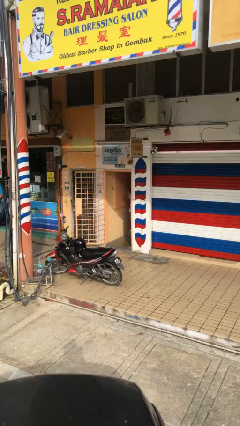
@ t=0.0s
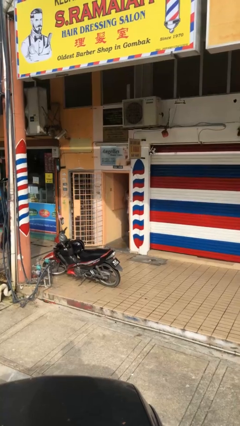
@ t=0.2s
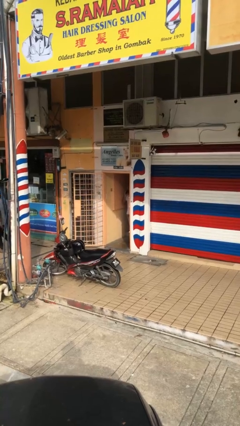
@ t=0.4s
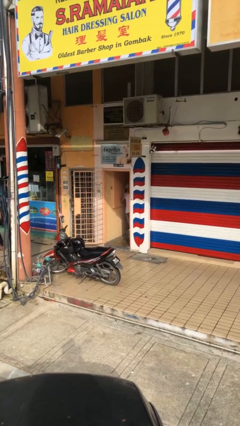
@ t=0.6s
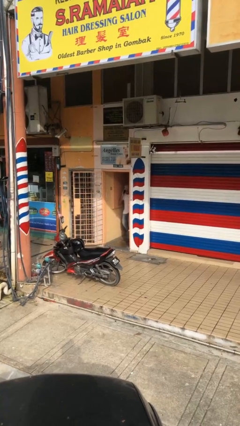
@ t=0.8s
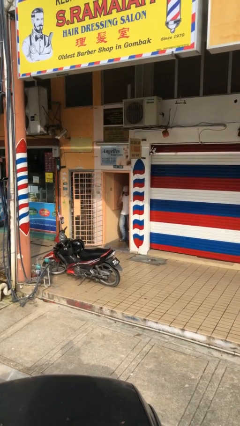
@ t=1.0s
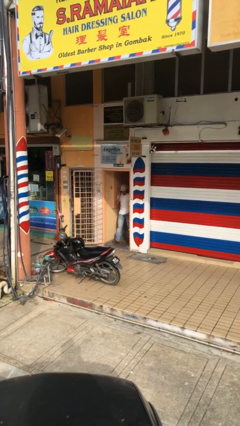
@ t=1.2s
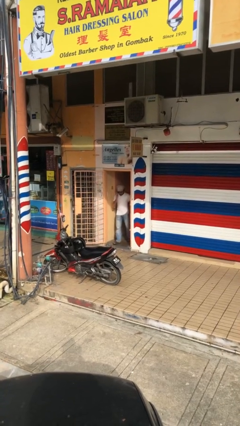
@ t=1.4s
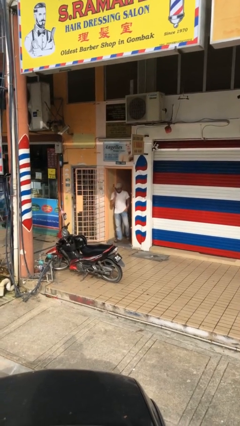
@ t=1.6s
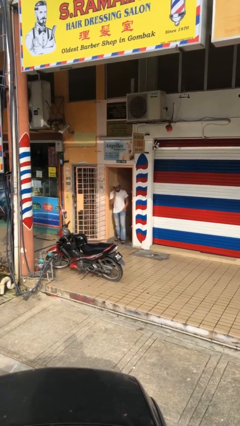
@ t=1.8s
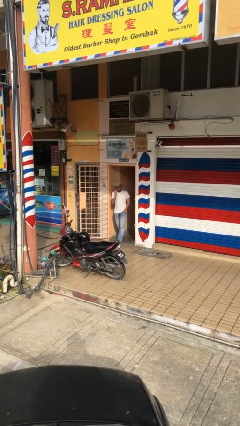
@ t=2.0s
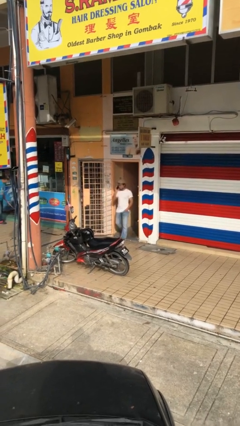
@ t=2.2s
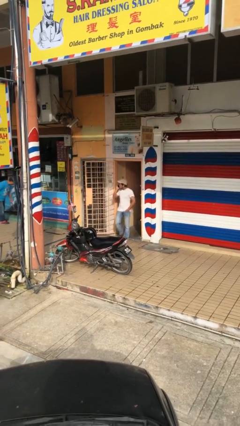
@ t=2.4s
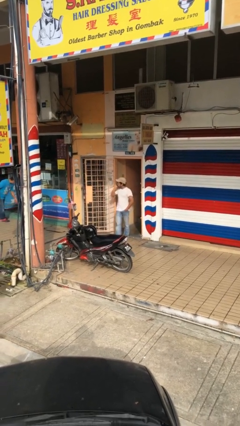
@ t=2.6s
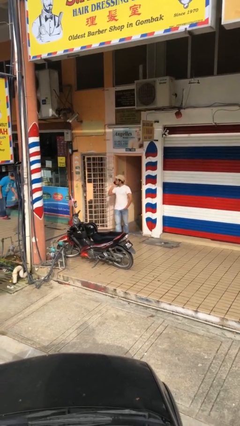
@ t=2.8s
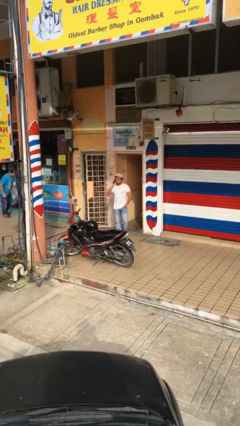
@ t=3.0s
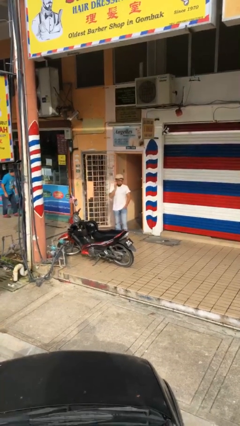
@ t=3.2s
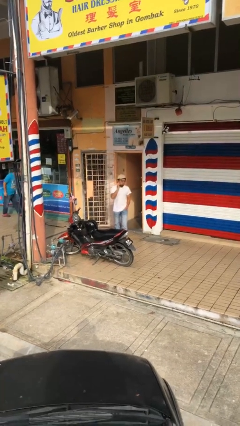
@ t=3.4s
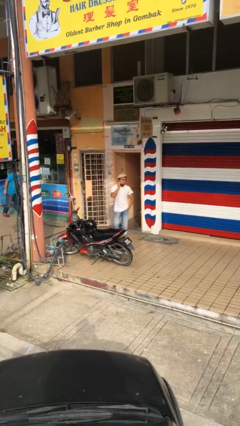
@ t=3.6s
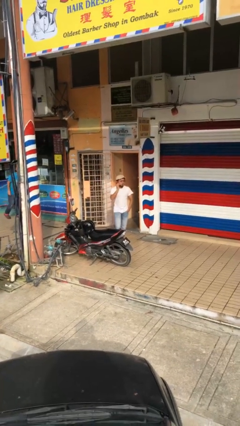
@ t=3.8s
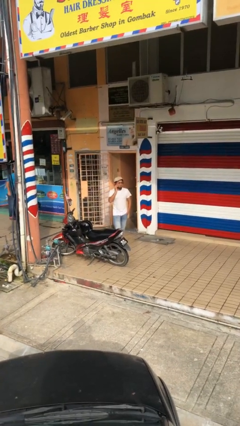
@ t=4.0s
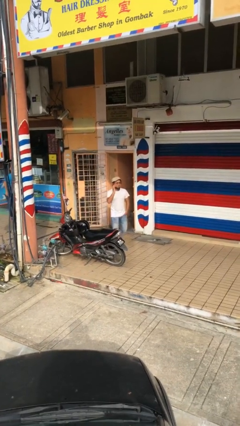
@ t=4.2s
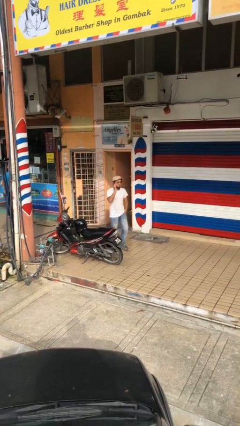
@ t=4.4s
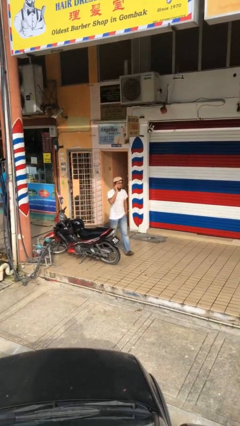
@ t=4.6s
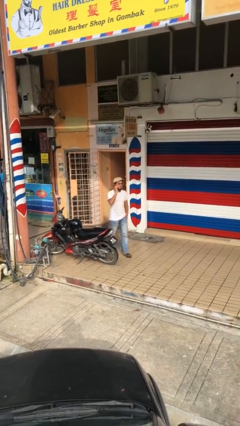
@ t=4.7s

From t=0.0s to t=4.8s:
person enters scene through structure

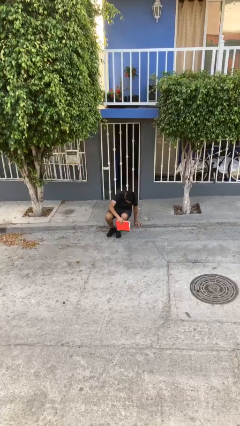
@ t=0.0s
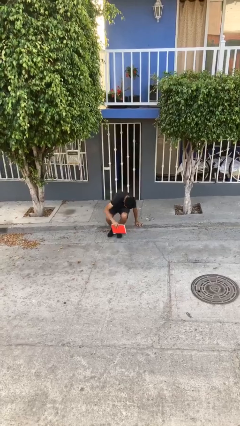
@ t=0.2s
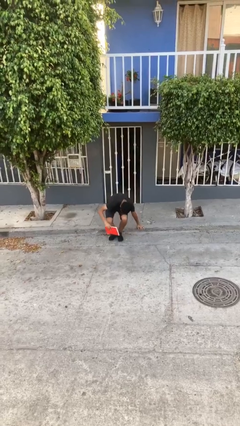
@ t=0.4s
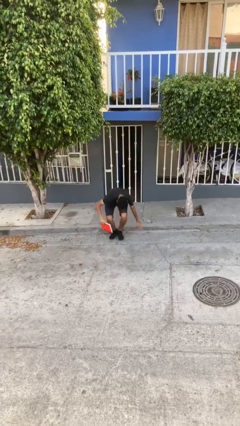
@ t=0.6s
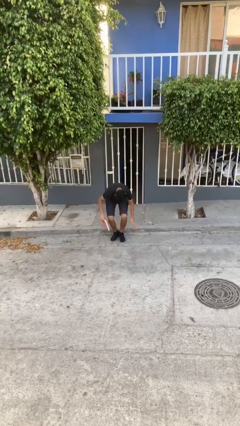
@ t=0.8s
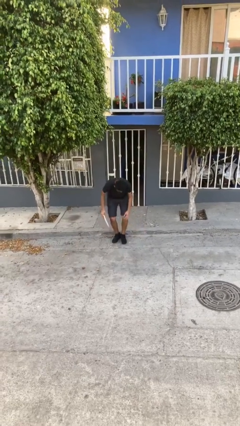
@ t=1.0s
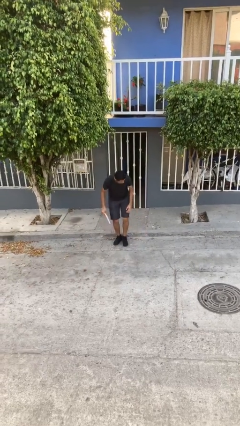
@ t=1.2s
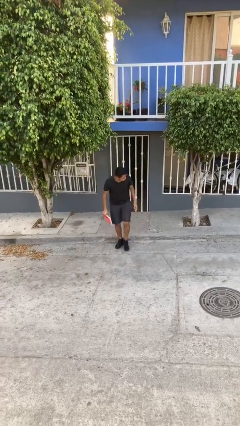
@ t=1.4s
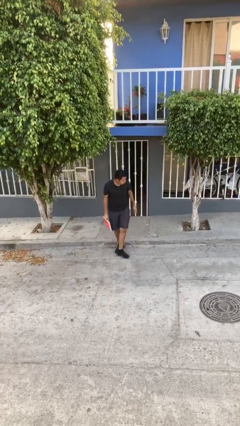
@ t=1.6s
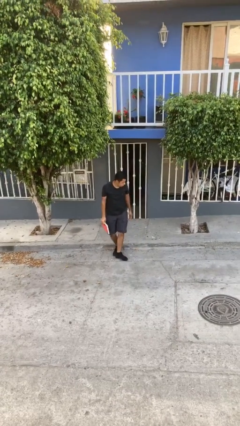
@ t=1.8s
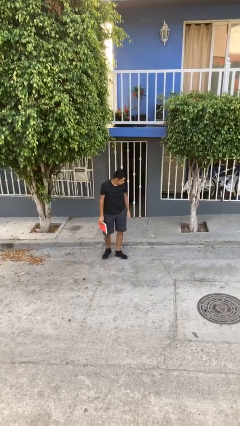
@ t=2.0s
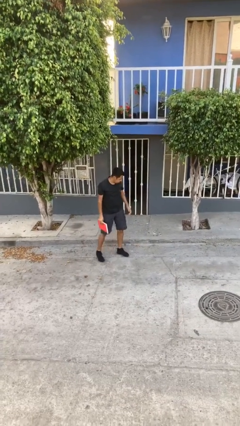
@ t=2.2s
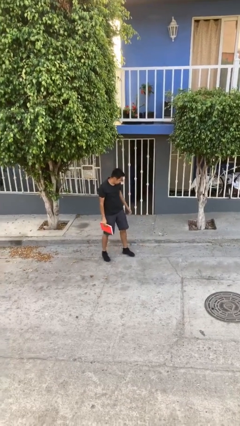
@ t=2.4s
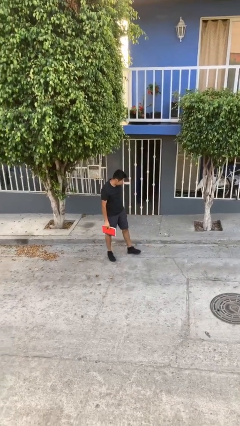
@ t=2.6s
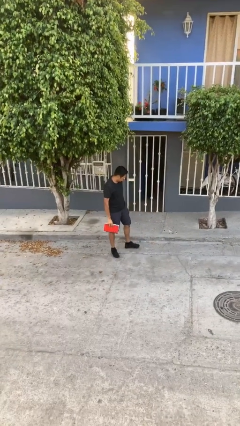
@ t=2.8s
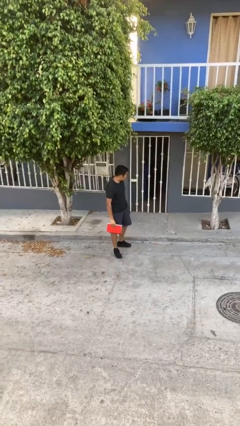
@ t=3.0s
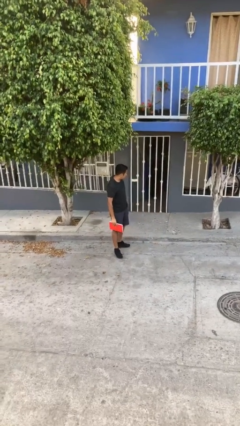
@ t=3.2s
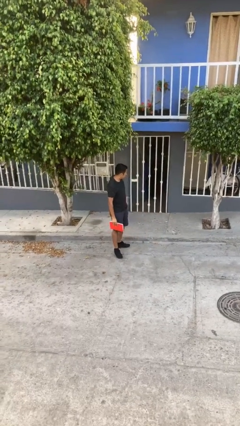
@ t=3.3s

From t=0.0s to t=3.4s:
person stands up

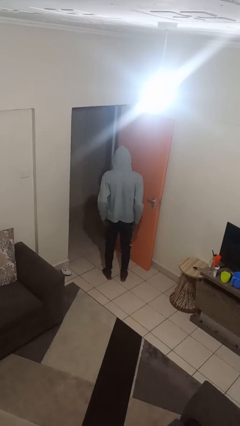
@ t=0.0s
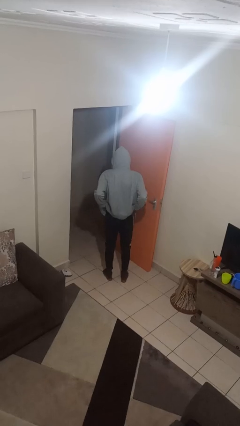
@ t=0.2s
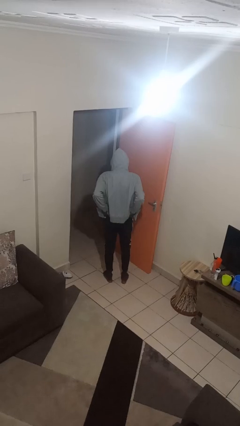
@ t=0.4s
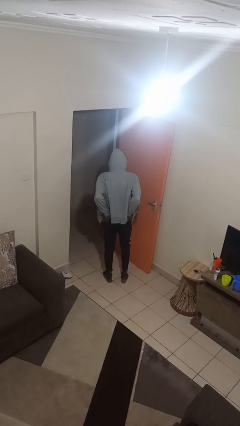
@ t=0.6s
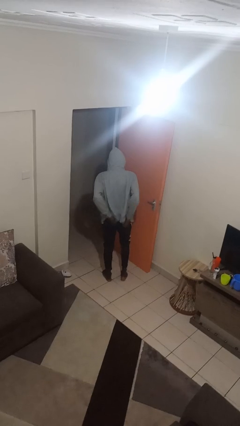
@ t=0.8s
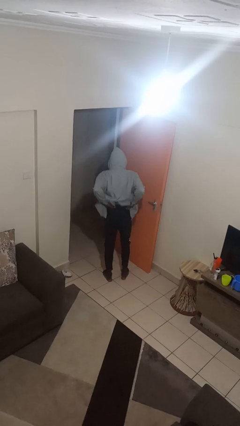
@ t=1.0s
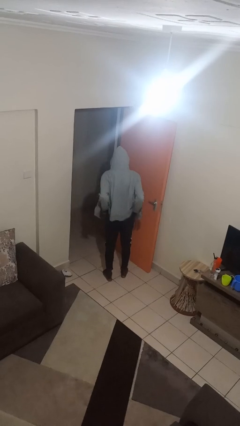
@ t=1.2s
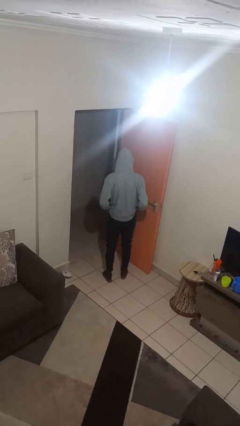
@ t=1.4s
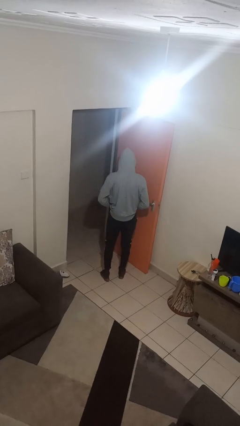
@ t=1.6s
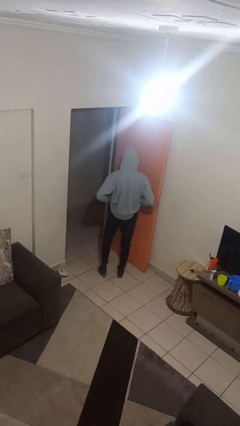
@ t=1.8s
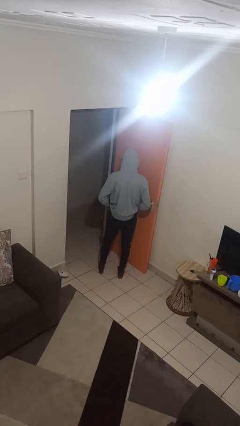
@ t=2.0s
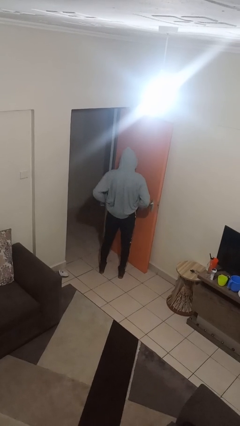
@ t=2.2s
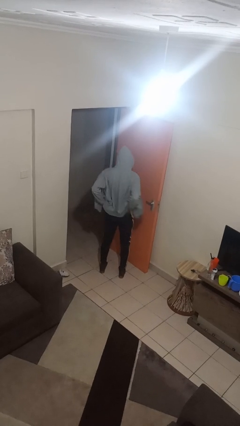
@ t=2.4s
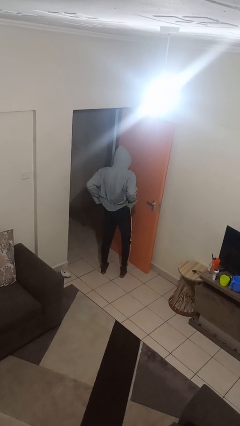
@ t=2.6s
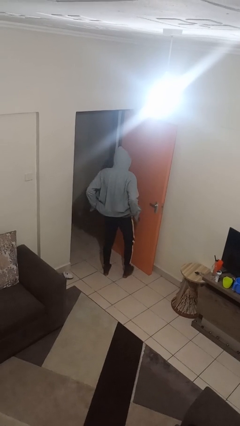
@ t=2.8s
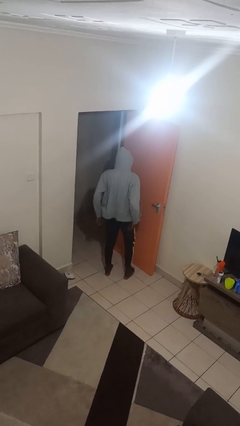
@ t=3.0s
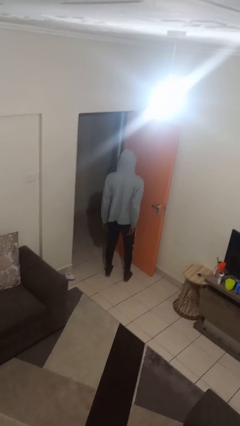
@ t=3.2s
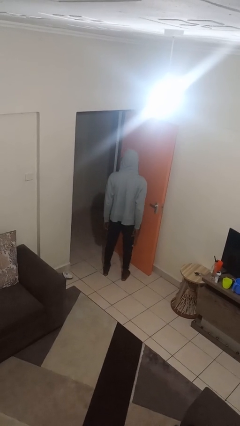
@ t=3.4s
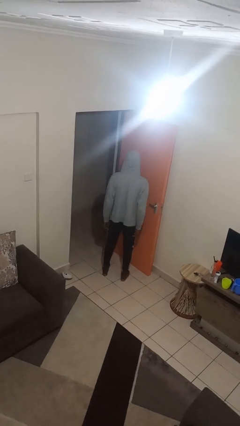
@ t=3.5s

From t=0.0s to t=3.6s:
person hikes up pants

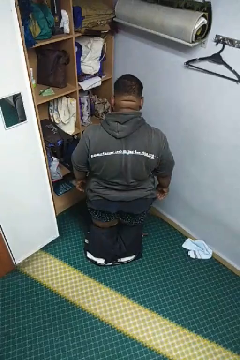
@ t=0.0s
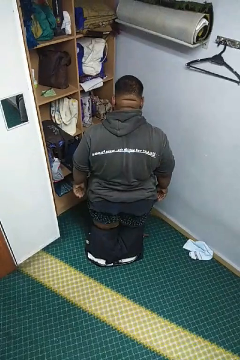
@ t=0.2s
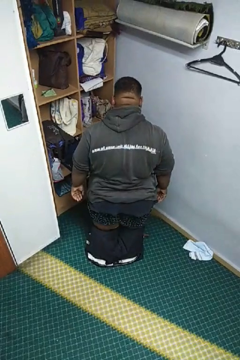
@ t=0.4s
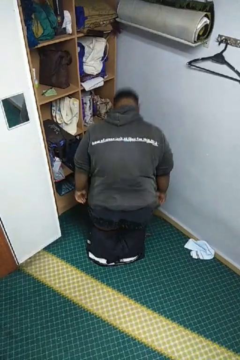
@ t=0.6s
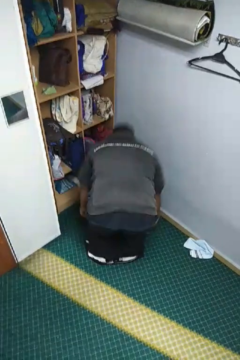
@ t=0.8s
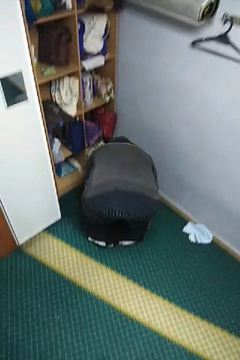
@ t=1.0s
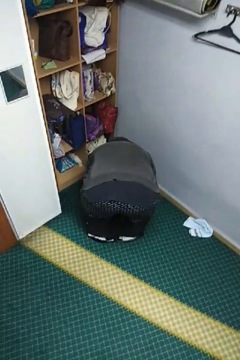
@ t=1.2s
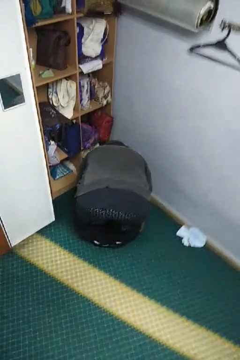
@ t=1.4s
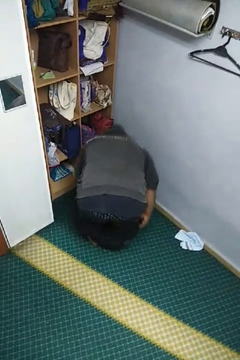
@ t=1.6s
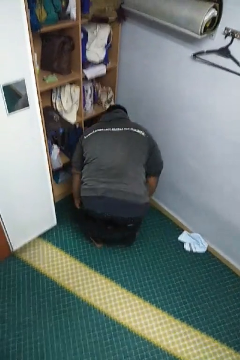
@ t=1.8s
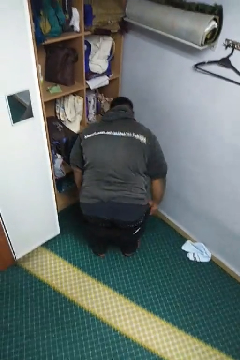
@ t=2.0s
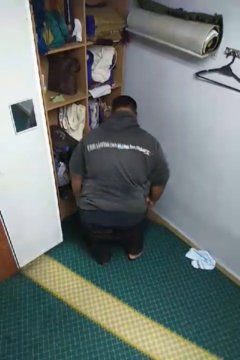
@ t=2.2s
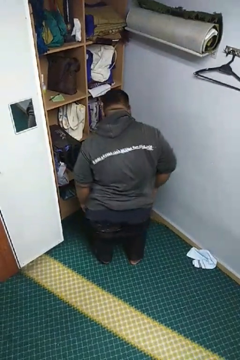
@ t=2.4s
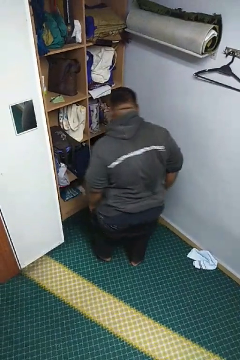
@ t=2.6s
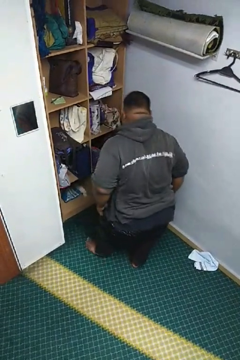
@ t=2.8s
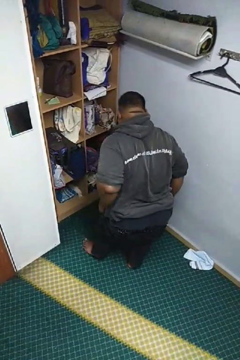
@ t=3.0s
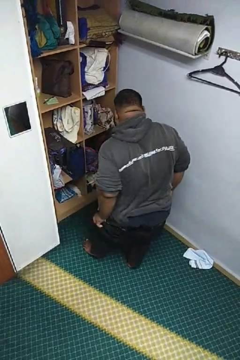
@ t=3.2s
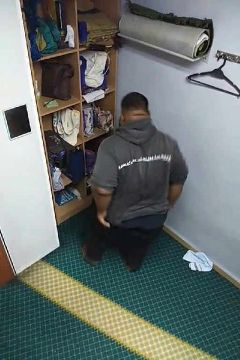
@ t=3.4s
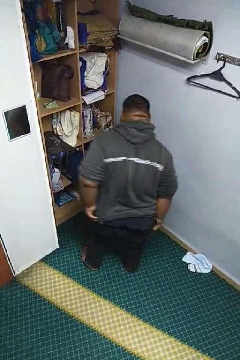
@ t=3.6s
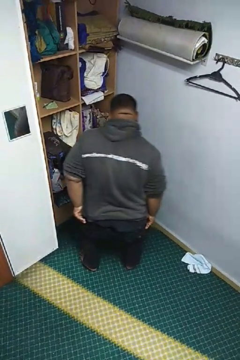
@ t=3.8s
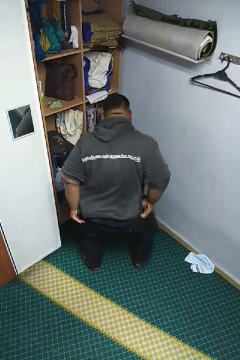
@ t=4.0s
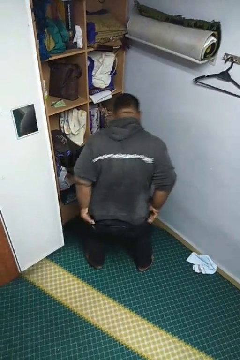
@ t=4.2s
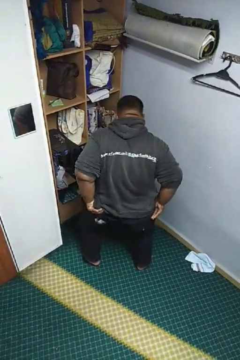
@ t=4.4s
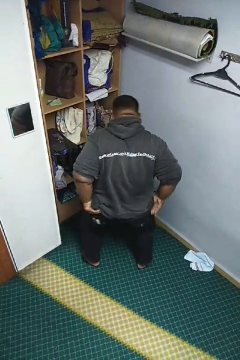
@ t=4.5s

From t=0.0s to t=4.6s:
person puts on pants

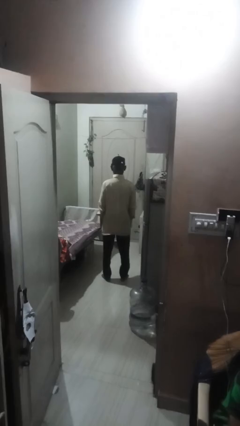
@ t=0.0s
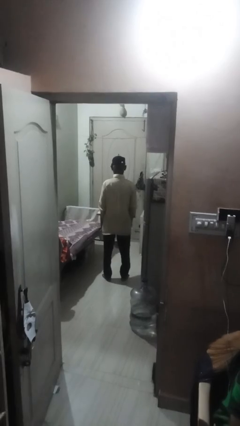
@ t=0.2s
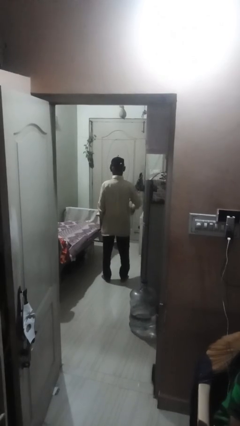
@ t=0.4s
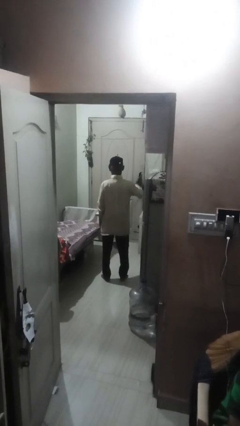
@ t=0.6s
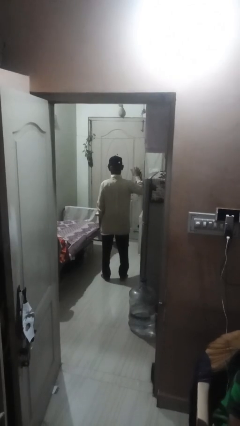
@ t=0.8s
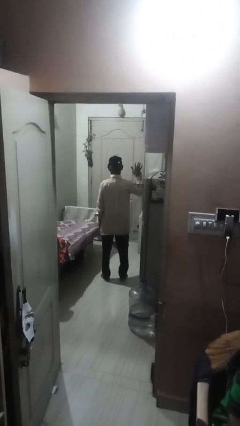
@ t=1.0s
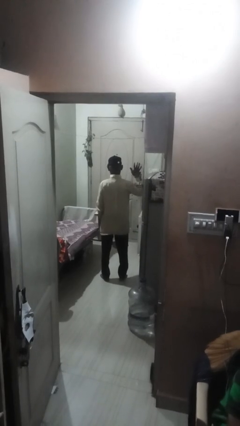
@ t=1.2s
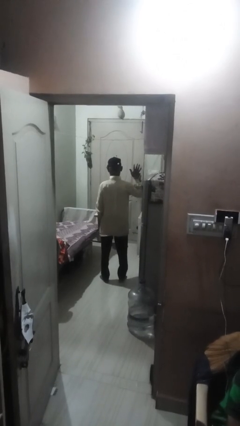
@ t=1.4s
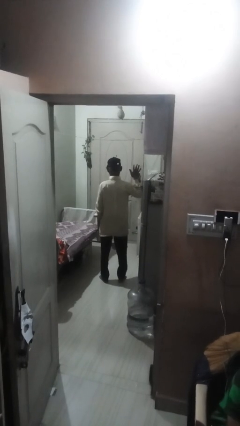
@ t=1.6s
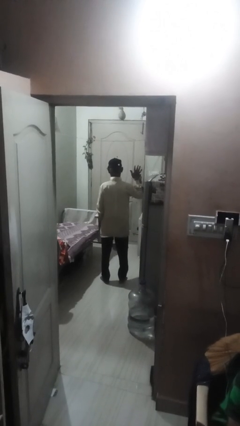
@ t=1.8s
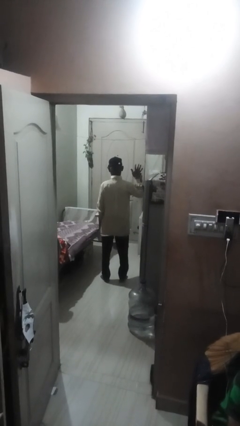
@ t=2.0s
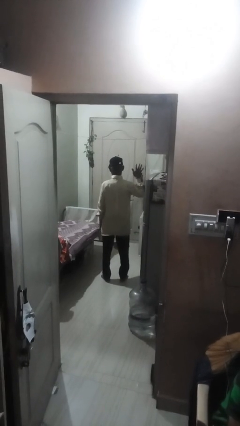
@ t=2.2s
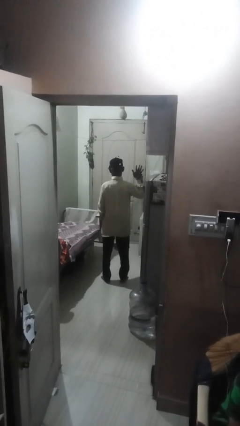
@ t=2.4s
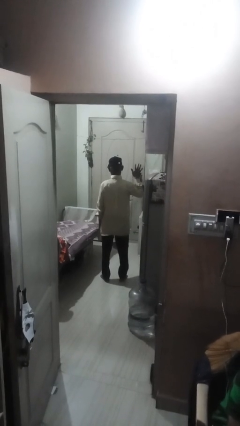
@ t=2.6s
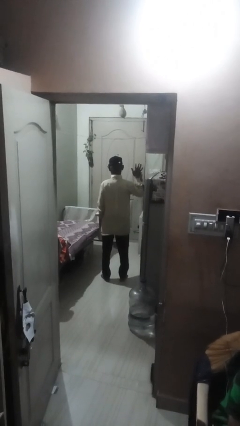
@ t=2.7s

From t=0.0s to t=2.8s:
person gestures number five
